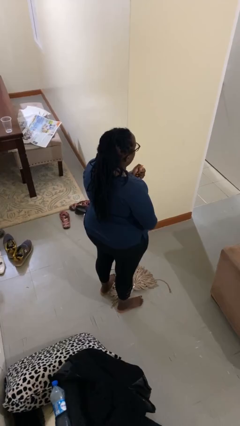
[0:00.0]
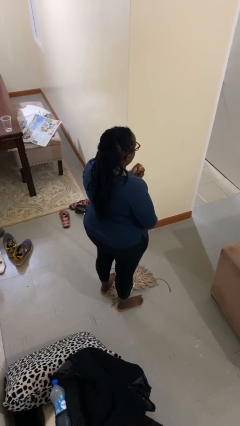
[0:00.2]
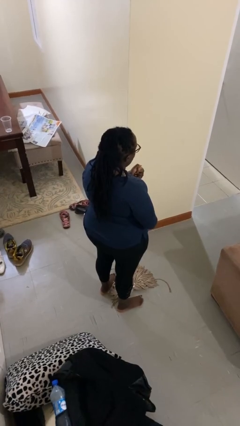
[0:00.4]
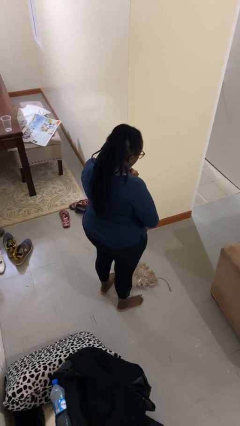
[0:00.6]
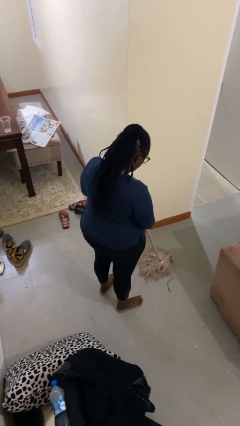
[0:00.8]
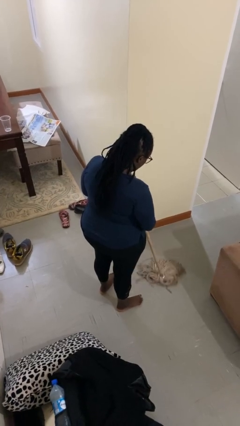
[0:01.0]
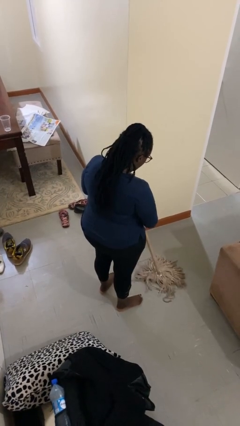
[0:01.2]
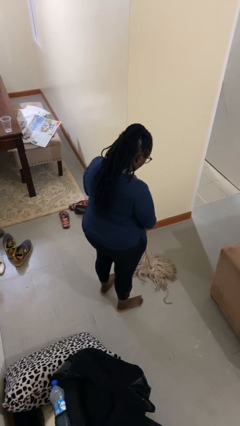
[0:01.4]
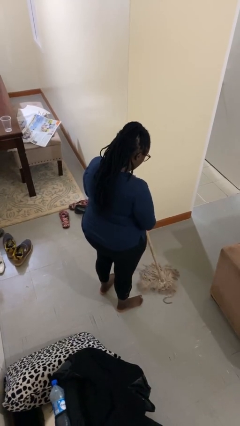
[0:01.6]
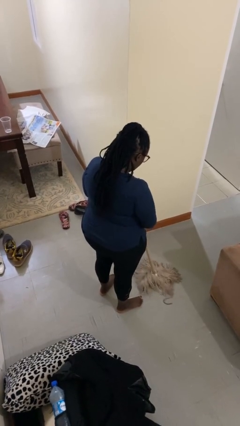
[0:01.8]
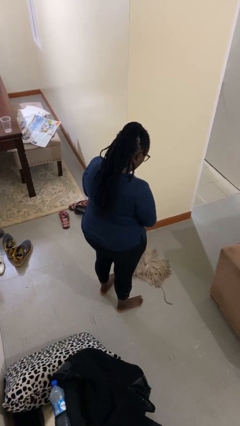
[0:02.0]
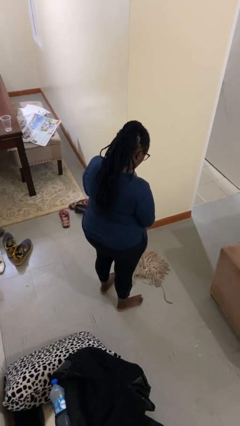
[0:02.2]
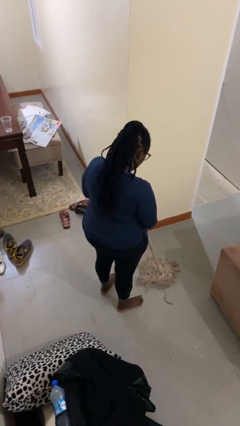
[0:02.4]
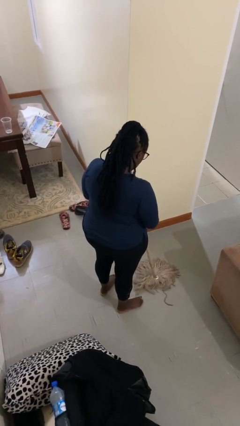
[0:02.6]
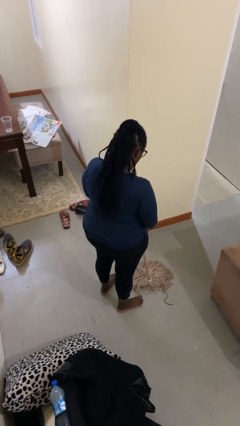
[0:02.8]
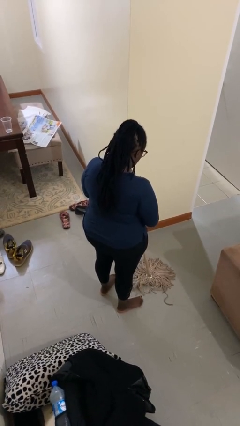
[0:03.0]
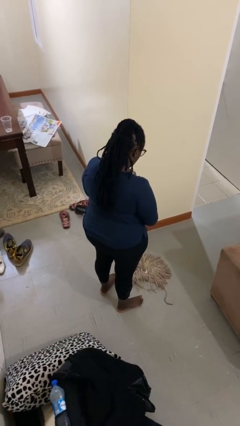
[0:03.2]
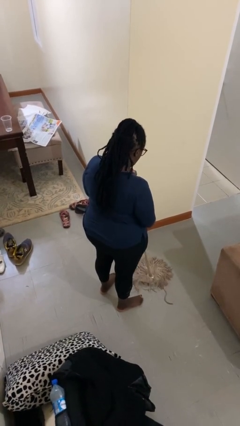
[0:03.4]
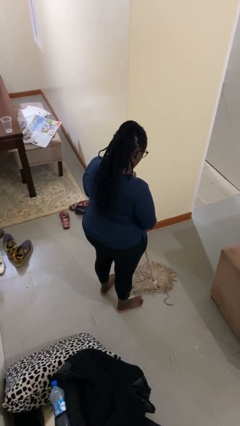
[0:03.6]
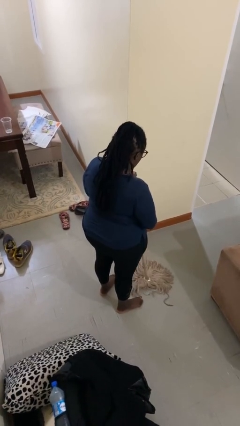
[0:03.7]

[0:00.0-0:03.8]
person mops

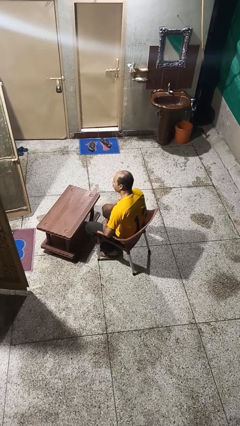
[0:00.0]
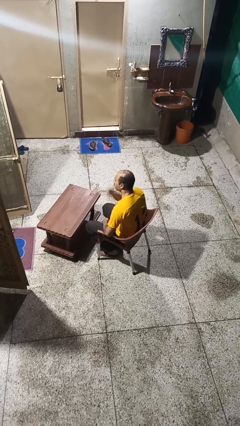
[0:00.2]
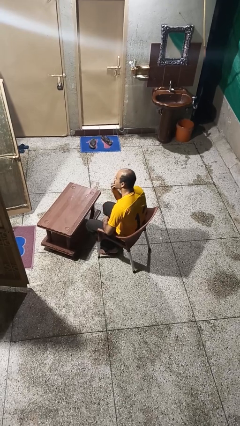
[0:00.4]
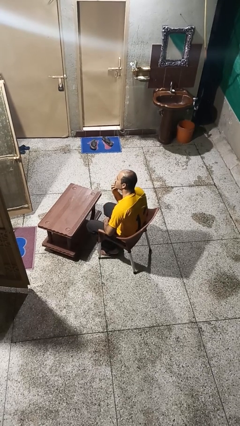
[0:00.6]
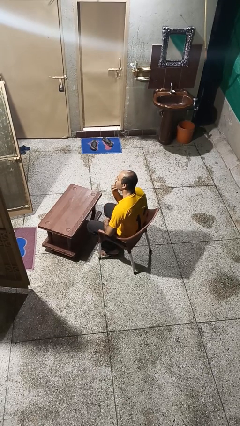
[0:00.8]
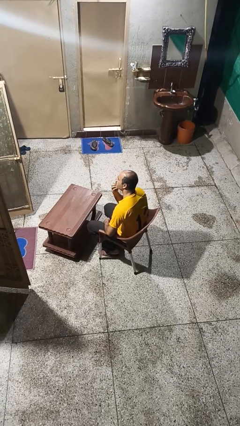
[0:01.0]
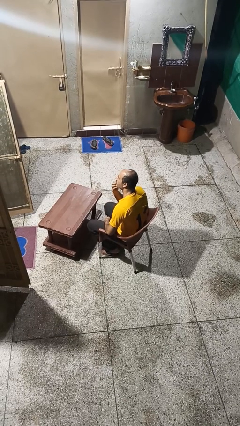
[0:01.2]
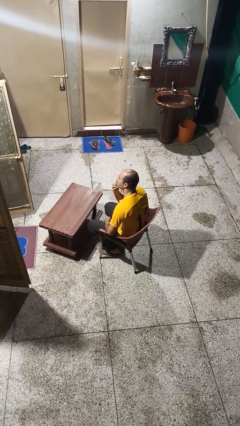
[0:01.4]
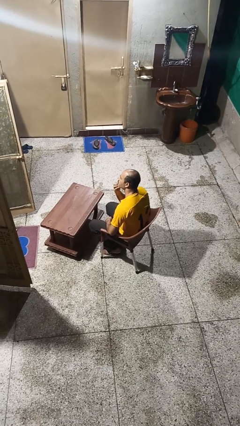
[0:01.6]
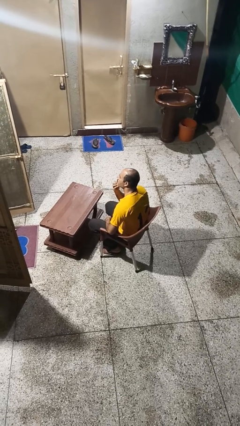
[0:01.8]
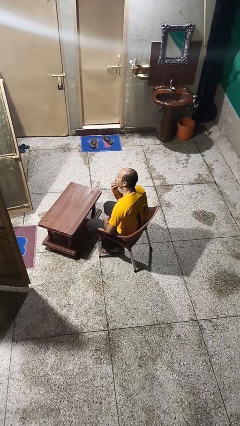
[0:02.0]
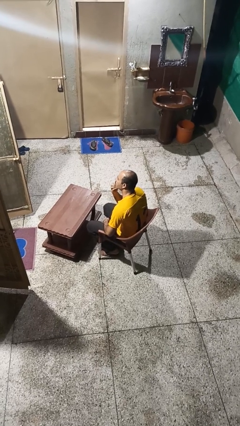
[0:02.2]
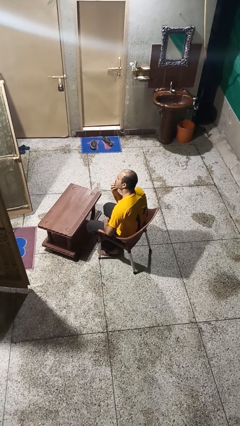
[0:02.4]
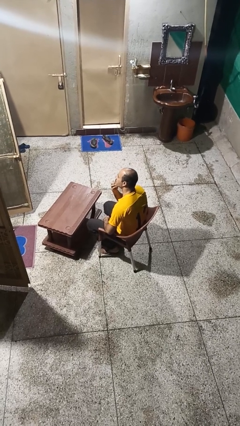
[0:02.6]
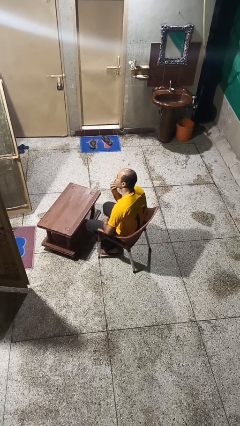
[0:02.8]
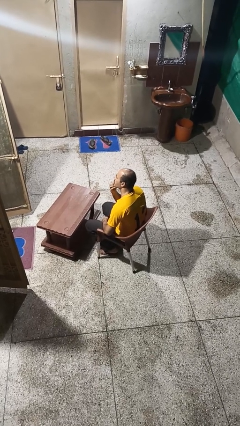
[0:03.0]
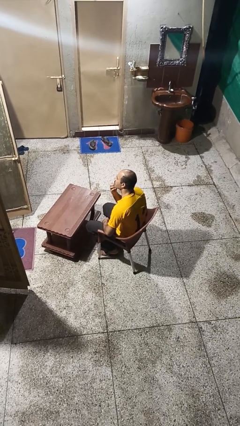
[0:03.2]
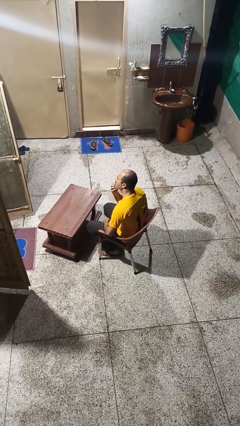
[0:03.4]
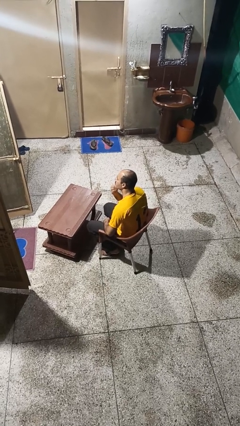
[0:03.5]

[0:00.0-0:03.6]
person strokes chin

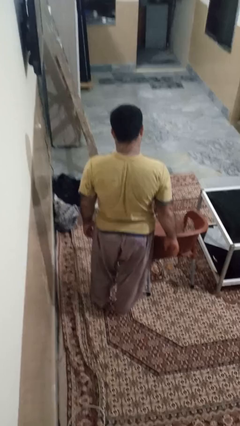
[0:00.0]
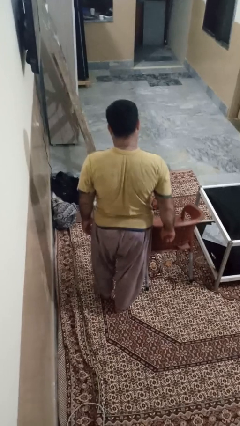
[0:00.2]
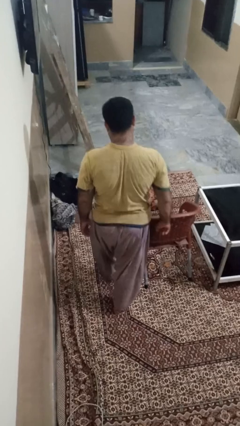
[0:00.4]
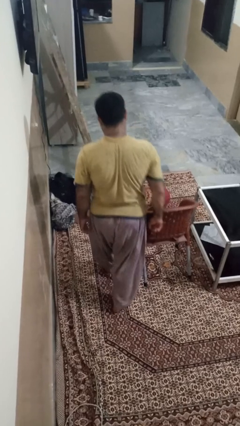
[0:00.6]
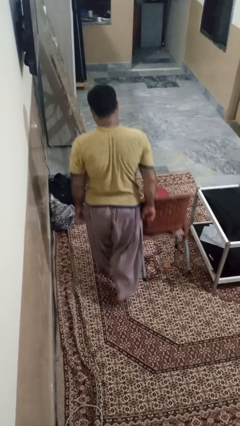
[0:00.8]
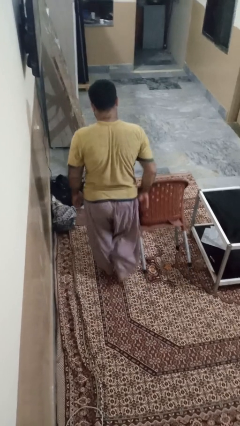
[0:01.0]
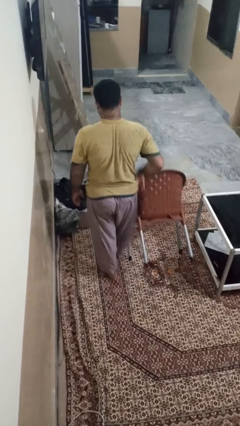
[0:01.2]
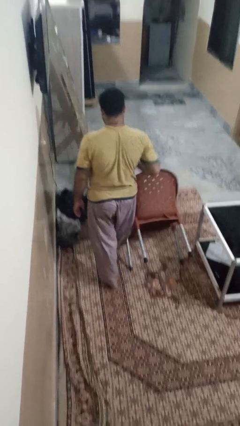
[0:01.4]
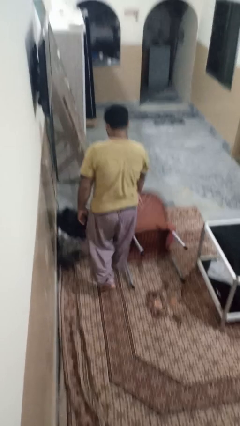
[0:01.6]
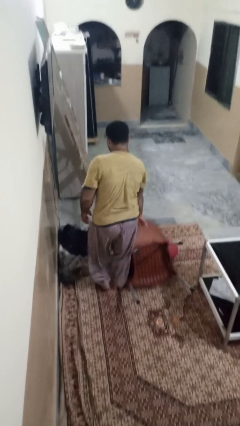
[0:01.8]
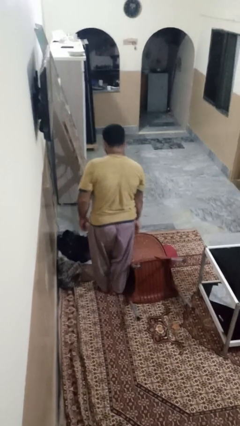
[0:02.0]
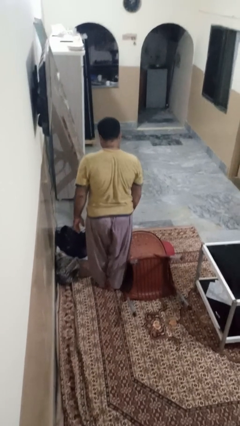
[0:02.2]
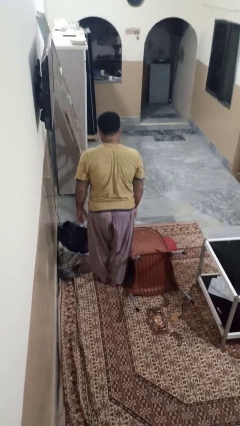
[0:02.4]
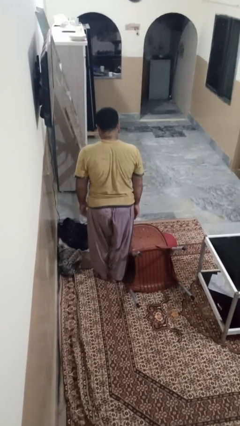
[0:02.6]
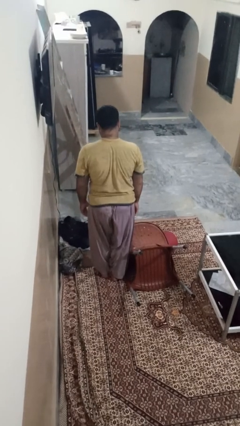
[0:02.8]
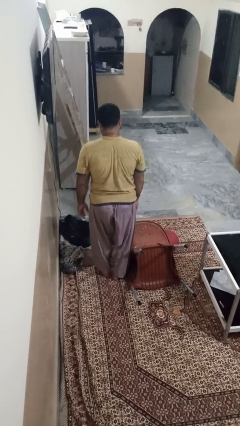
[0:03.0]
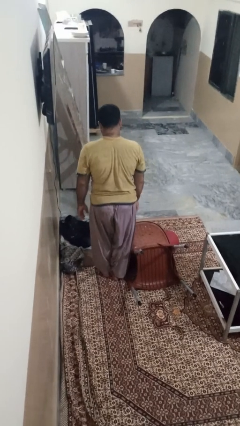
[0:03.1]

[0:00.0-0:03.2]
person knocks over furniture

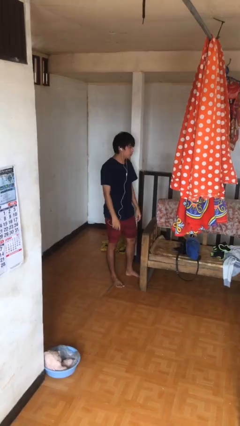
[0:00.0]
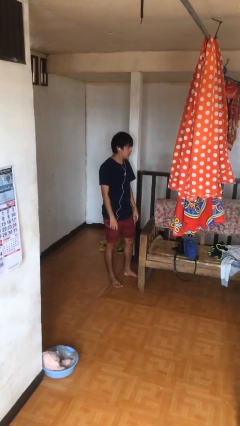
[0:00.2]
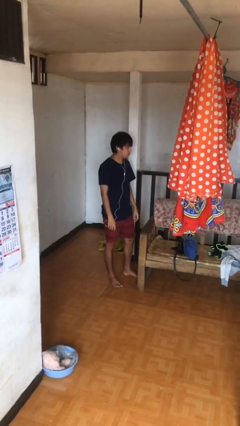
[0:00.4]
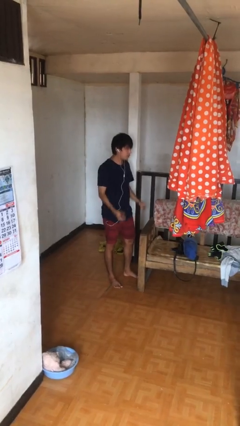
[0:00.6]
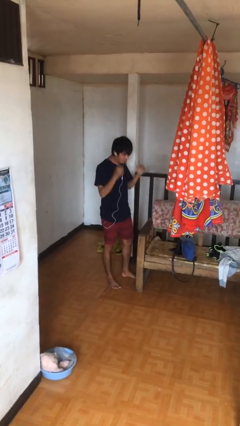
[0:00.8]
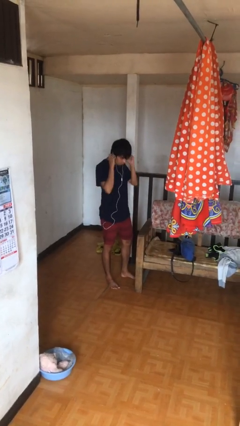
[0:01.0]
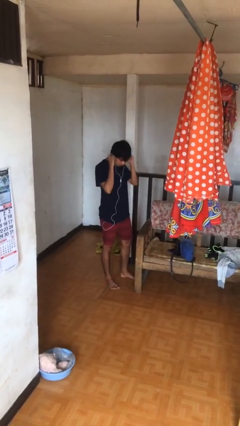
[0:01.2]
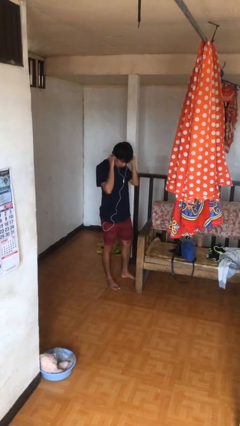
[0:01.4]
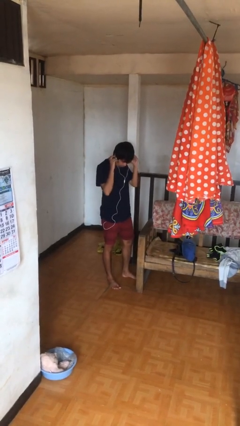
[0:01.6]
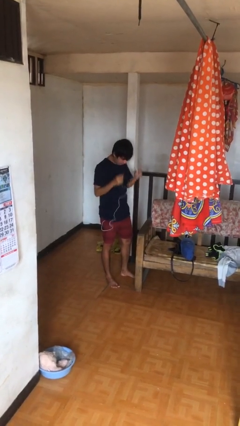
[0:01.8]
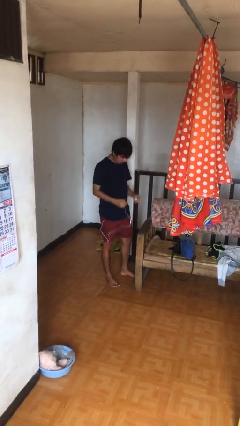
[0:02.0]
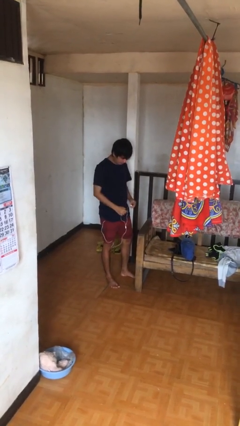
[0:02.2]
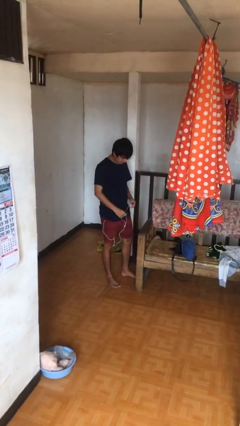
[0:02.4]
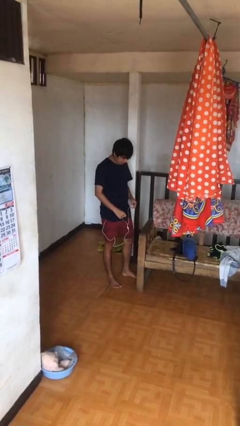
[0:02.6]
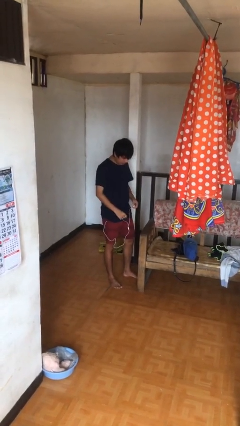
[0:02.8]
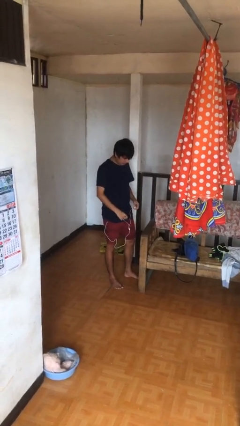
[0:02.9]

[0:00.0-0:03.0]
person takes off headphones

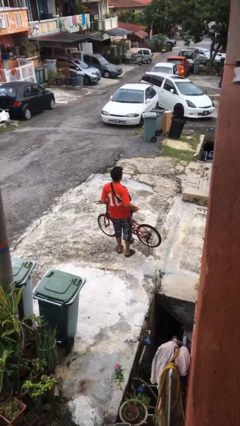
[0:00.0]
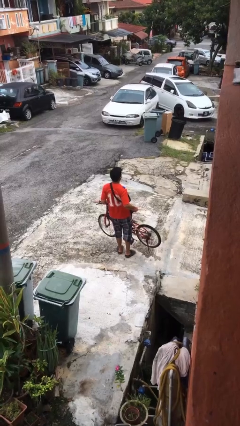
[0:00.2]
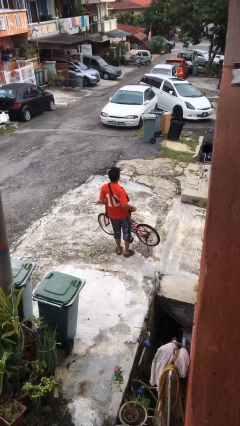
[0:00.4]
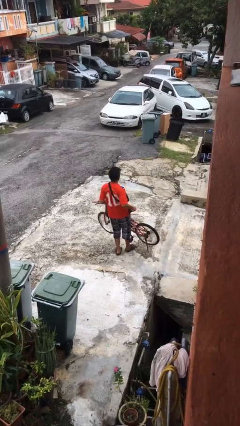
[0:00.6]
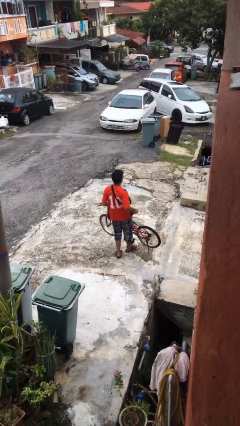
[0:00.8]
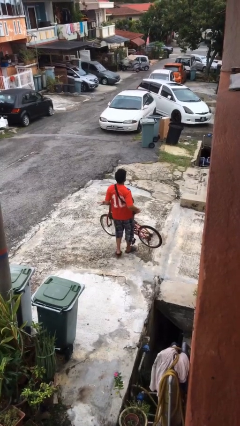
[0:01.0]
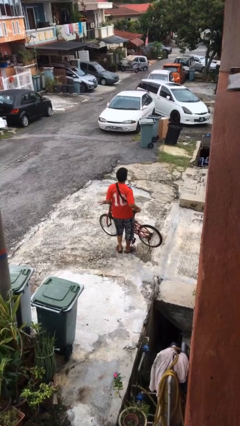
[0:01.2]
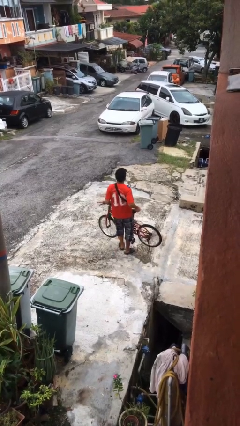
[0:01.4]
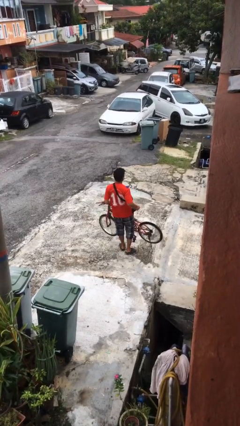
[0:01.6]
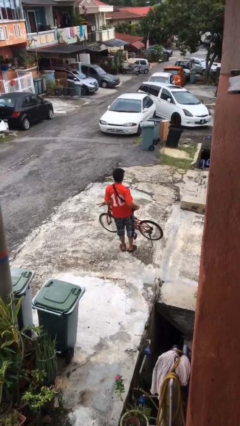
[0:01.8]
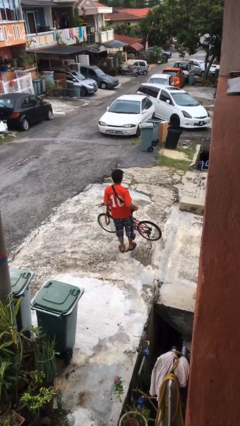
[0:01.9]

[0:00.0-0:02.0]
person carries bicycle

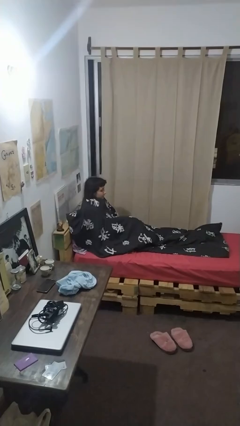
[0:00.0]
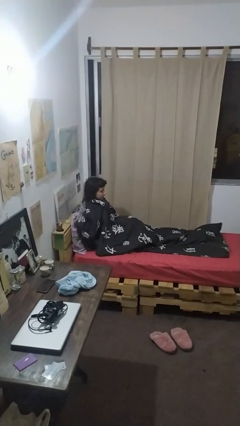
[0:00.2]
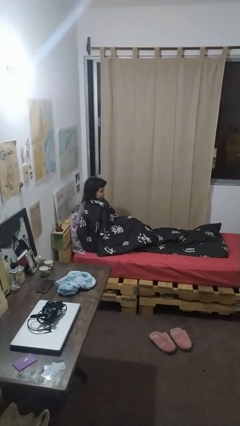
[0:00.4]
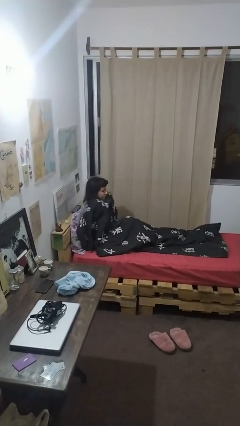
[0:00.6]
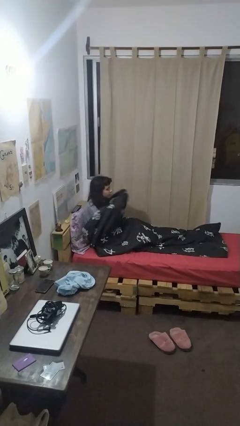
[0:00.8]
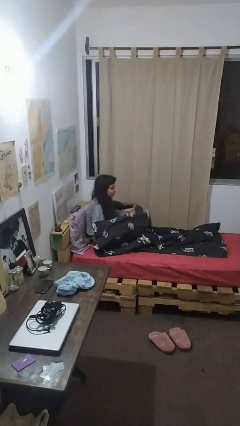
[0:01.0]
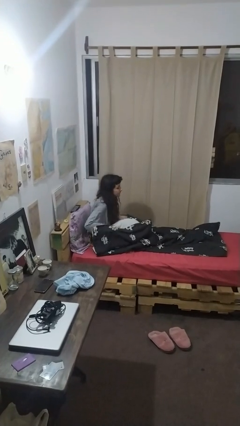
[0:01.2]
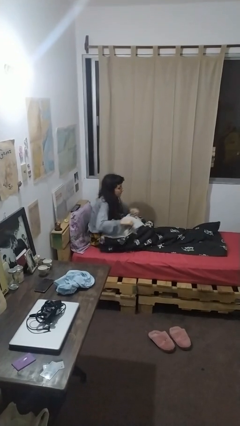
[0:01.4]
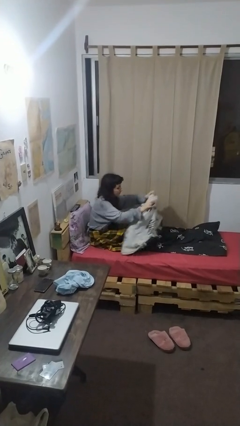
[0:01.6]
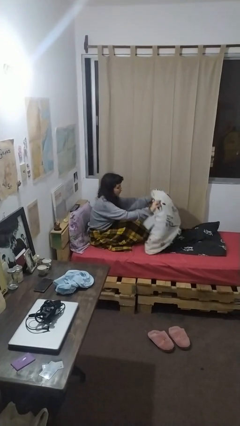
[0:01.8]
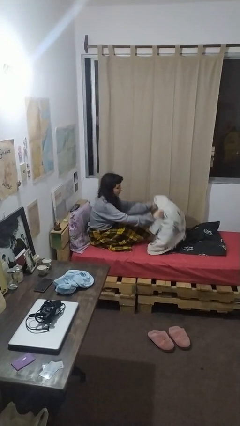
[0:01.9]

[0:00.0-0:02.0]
person uncovers with blanket
